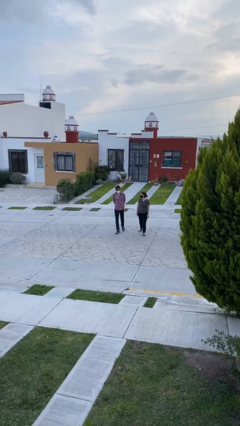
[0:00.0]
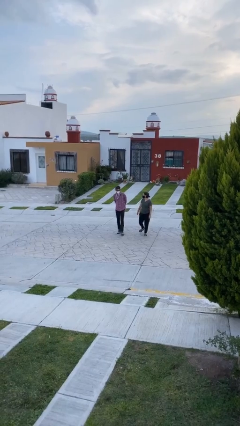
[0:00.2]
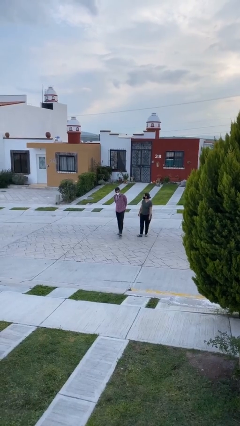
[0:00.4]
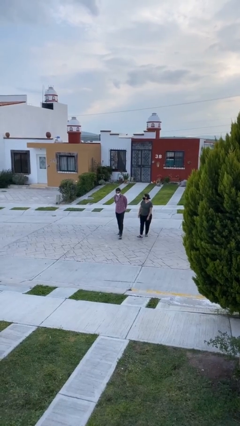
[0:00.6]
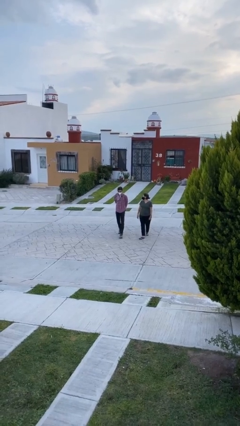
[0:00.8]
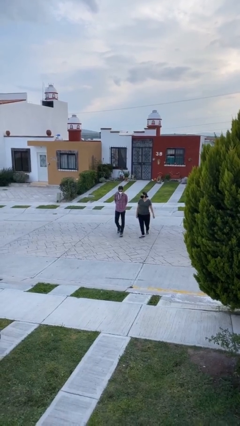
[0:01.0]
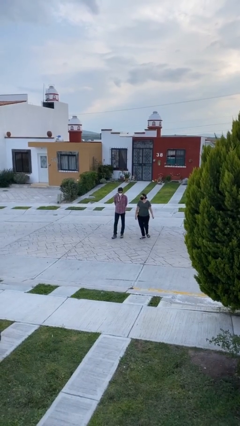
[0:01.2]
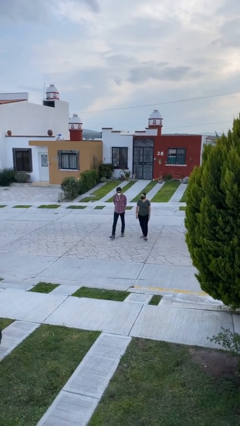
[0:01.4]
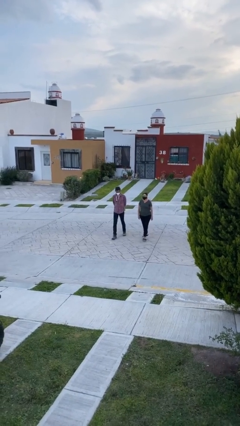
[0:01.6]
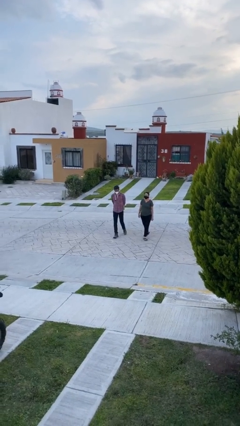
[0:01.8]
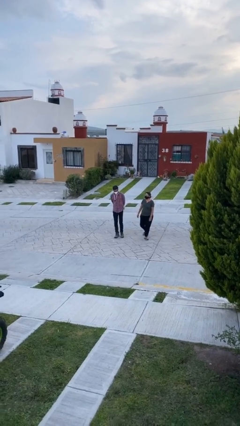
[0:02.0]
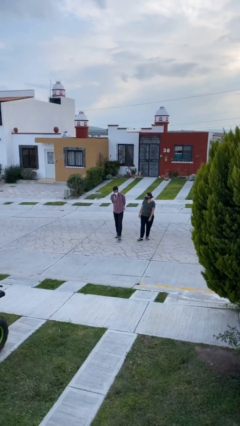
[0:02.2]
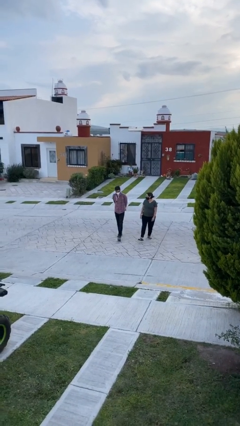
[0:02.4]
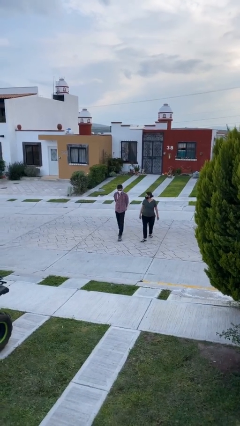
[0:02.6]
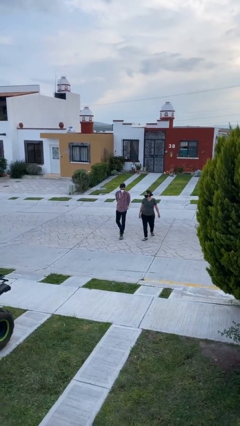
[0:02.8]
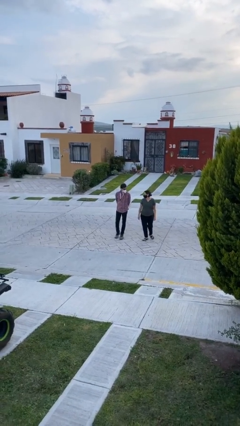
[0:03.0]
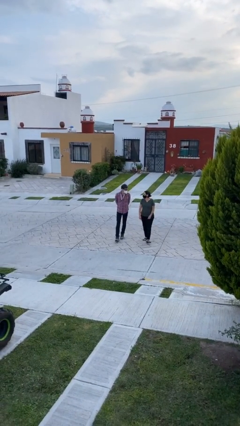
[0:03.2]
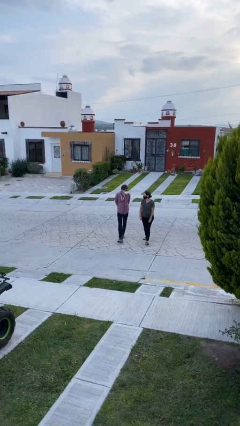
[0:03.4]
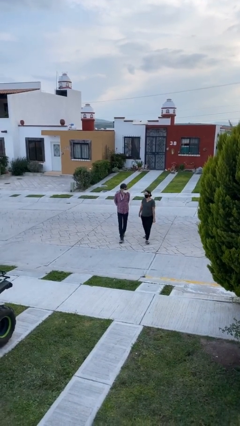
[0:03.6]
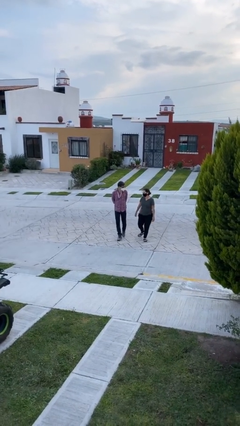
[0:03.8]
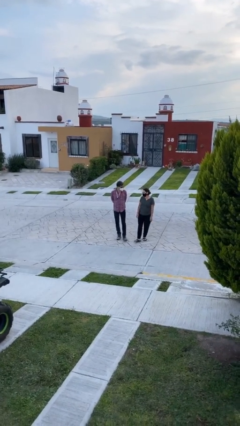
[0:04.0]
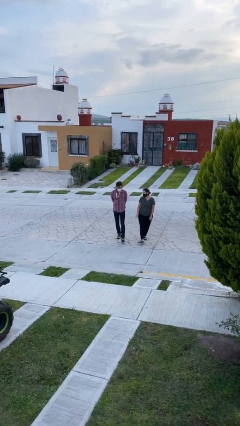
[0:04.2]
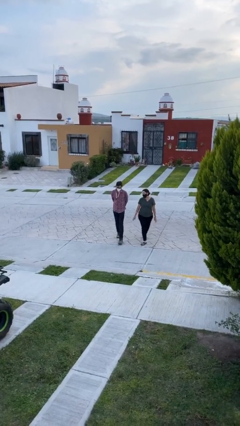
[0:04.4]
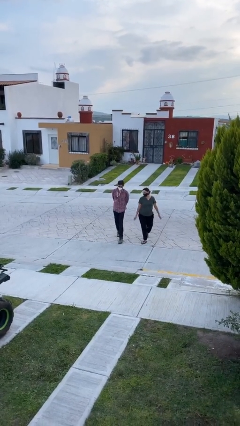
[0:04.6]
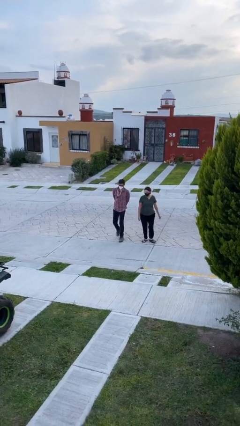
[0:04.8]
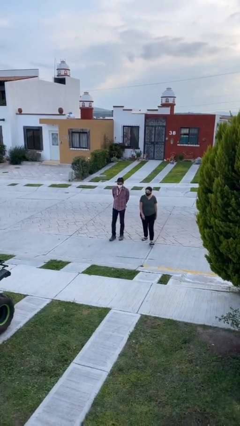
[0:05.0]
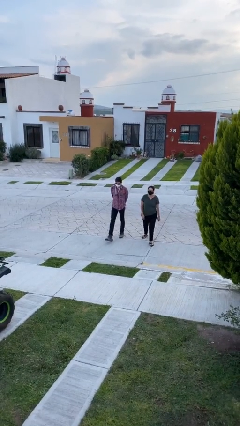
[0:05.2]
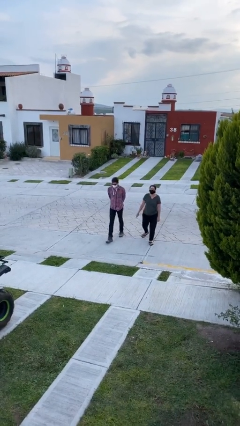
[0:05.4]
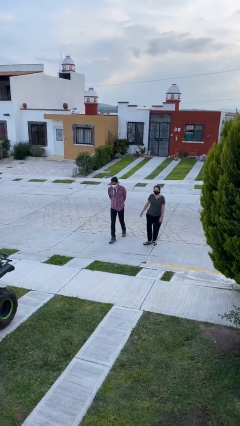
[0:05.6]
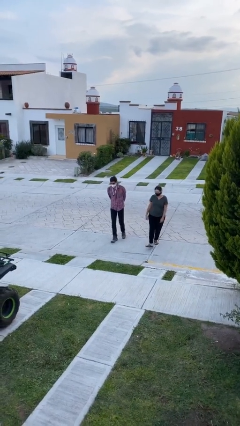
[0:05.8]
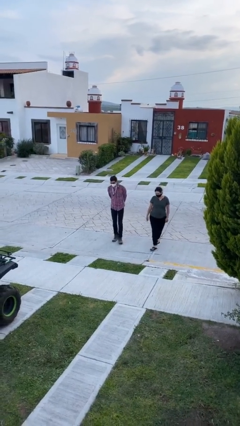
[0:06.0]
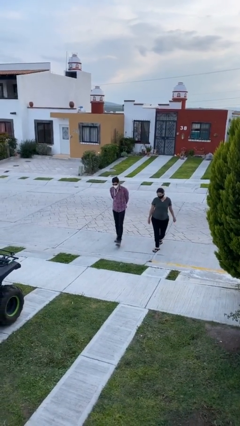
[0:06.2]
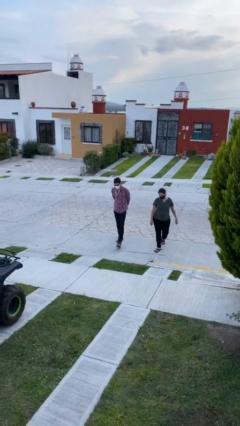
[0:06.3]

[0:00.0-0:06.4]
person talks to person

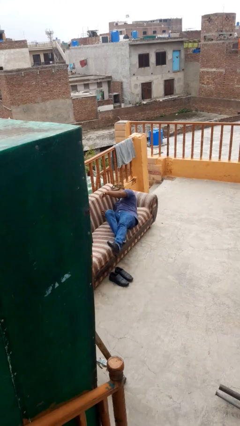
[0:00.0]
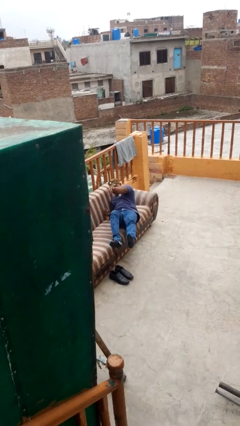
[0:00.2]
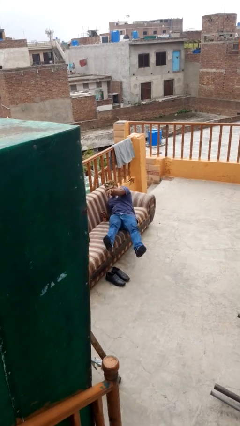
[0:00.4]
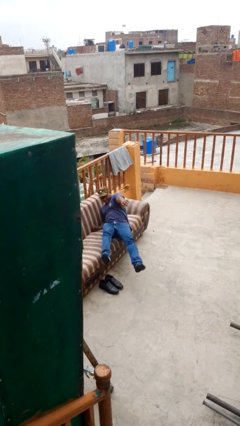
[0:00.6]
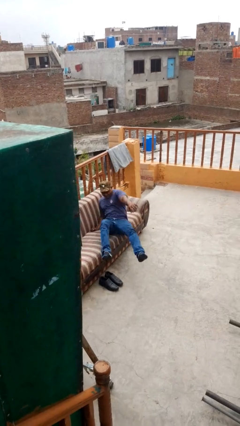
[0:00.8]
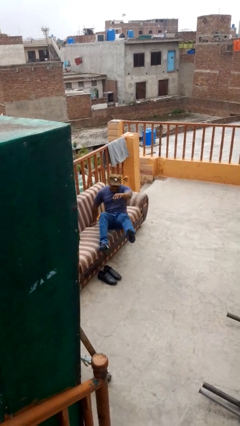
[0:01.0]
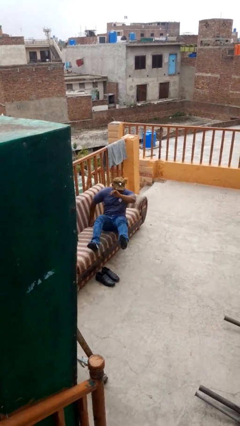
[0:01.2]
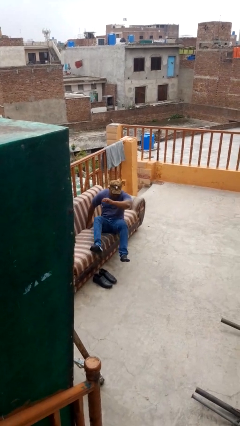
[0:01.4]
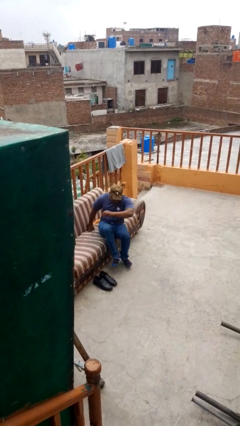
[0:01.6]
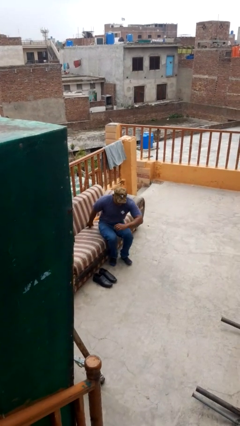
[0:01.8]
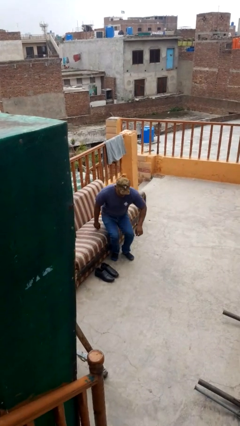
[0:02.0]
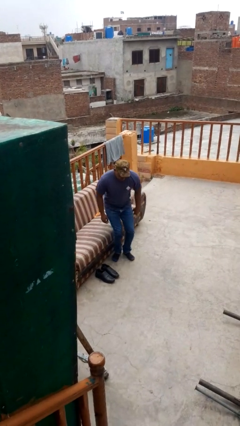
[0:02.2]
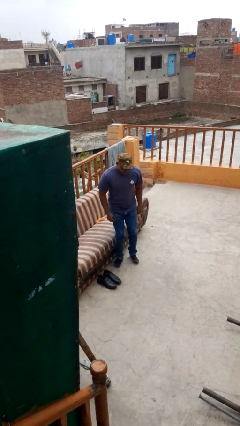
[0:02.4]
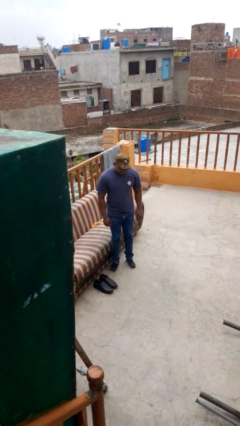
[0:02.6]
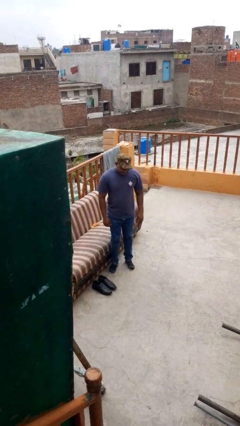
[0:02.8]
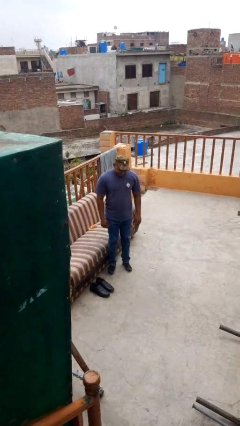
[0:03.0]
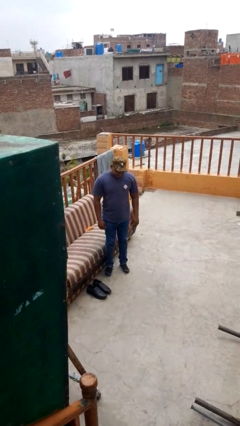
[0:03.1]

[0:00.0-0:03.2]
person stands up

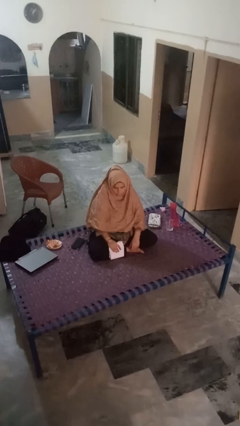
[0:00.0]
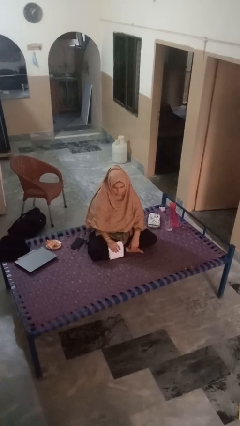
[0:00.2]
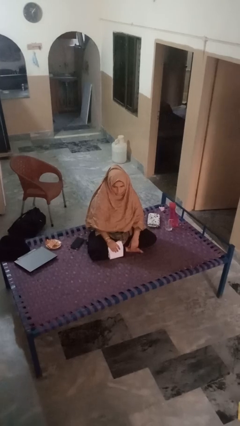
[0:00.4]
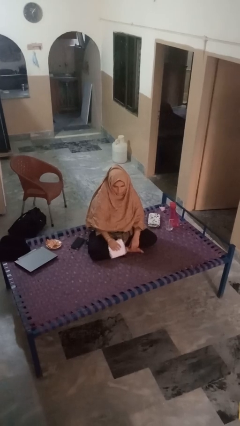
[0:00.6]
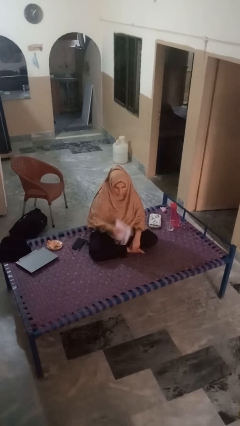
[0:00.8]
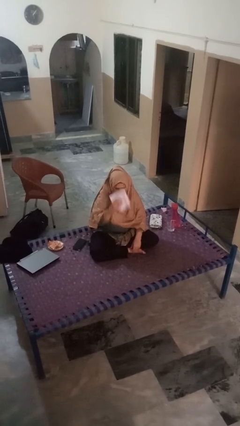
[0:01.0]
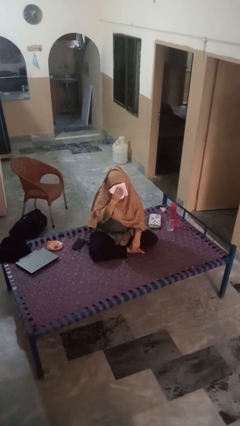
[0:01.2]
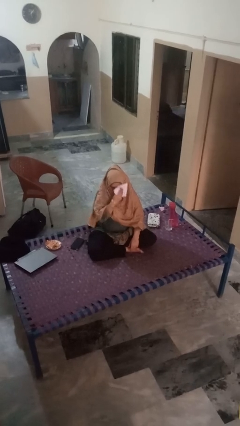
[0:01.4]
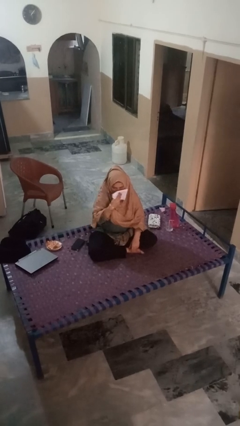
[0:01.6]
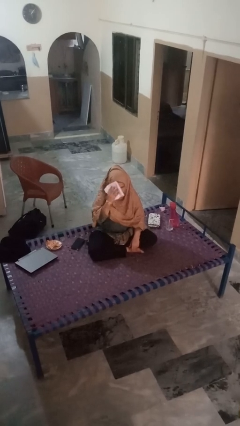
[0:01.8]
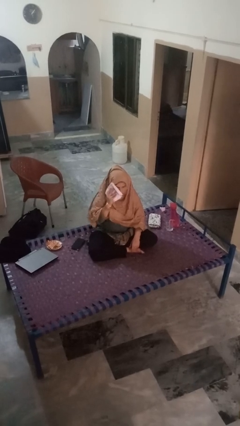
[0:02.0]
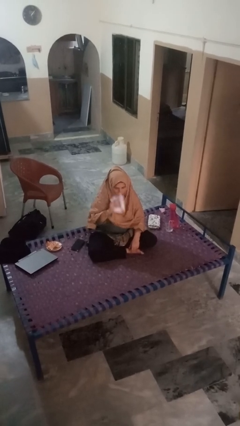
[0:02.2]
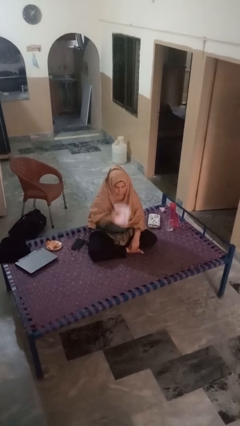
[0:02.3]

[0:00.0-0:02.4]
person wipes mouth with napkin

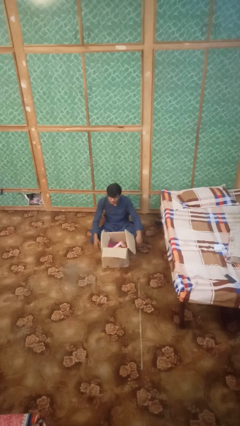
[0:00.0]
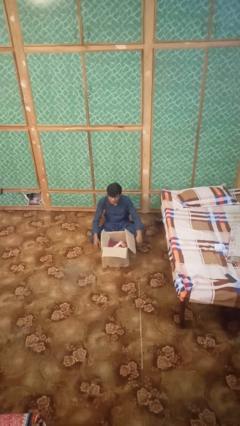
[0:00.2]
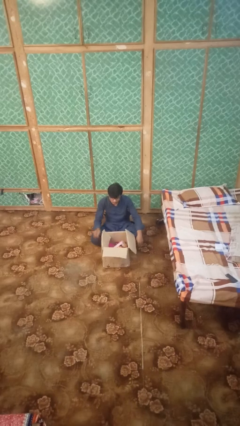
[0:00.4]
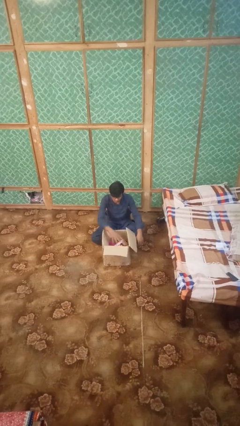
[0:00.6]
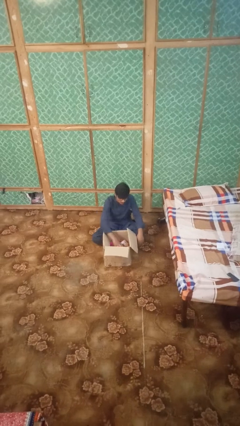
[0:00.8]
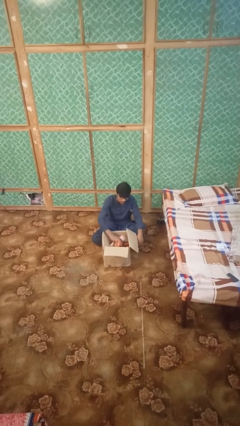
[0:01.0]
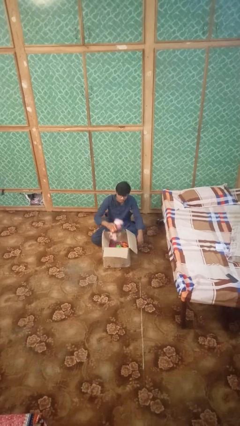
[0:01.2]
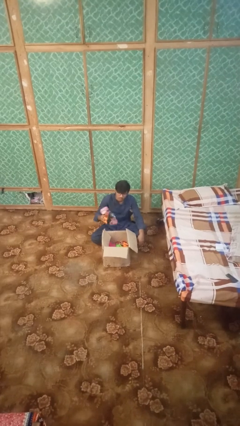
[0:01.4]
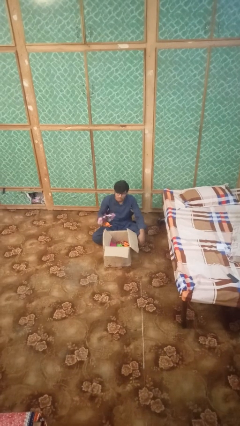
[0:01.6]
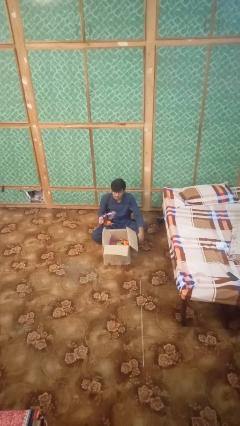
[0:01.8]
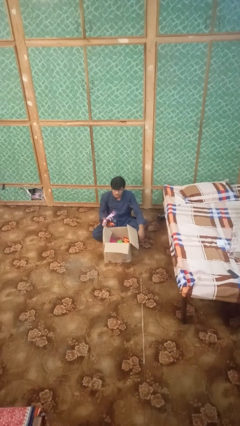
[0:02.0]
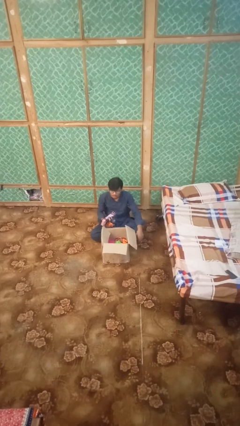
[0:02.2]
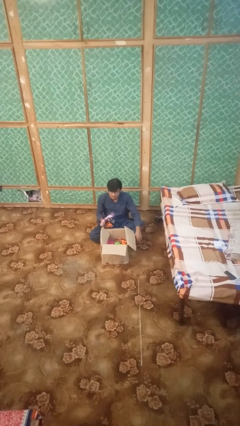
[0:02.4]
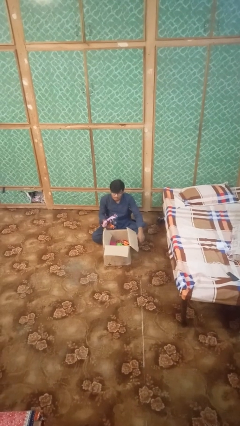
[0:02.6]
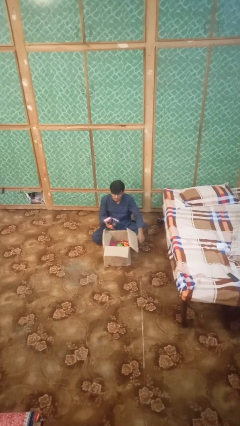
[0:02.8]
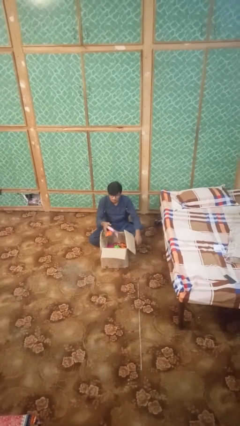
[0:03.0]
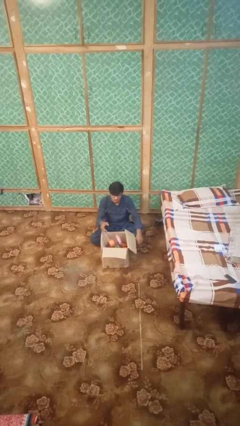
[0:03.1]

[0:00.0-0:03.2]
person takes object from box

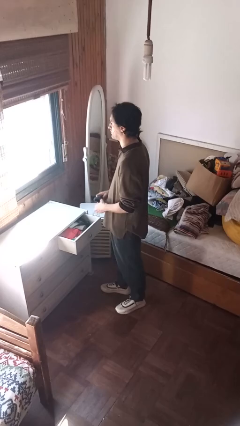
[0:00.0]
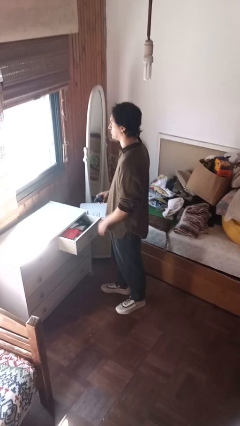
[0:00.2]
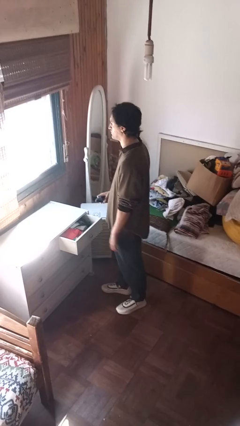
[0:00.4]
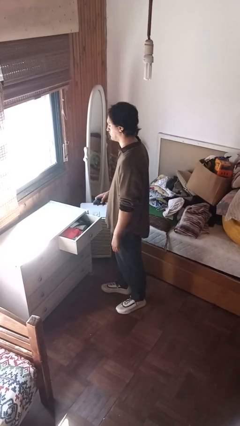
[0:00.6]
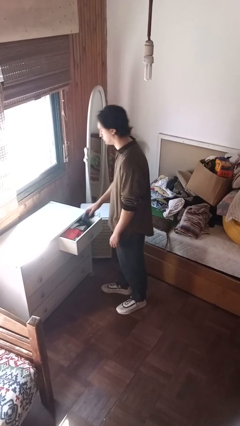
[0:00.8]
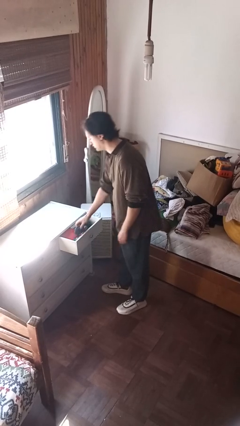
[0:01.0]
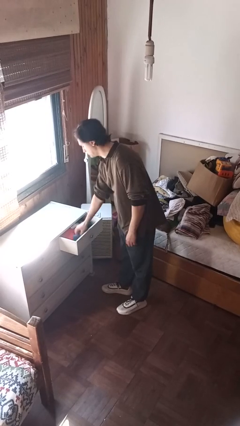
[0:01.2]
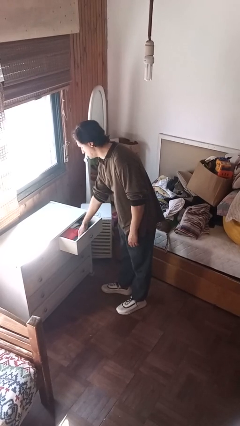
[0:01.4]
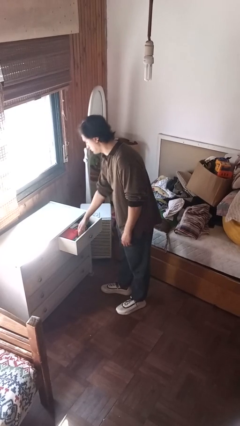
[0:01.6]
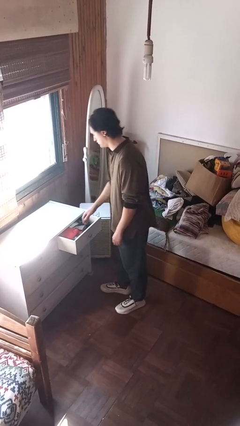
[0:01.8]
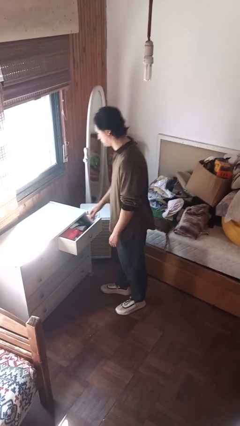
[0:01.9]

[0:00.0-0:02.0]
person puts clothes into dresser
